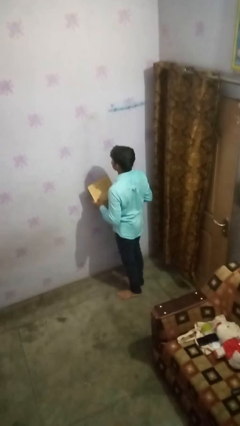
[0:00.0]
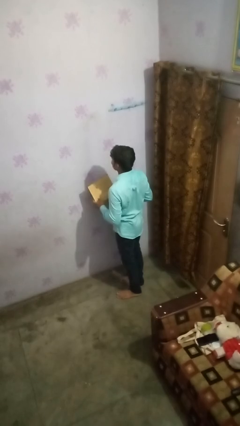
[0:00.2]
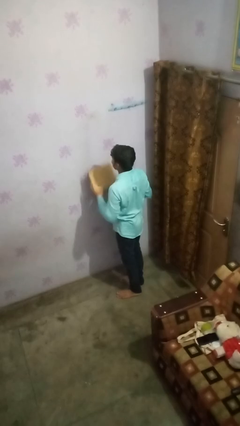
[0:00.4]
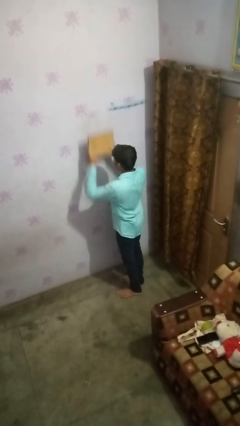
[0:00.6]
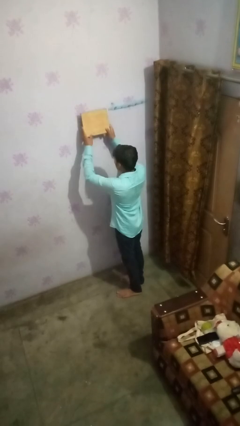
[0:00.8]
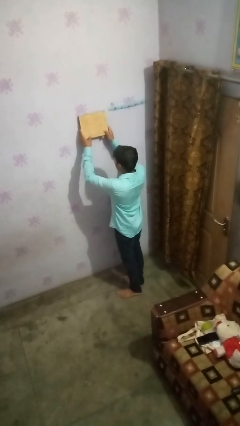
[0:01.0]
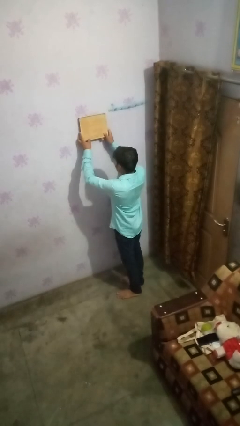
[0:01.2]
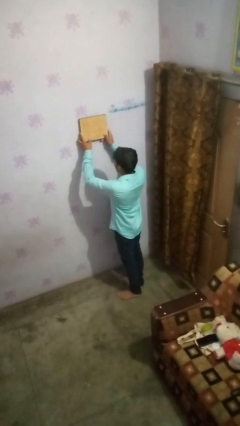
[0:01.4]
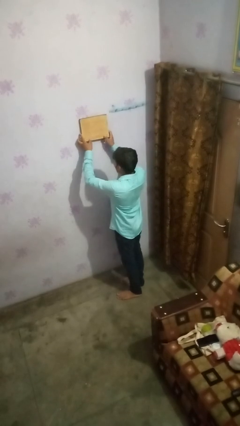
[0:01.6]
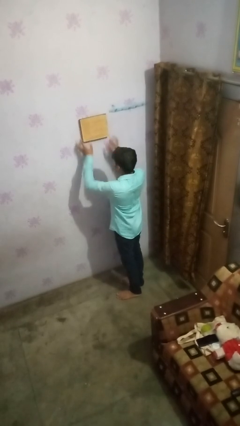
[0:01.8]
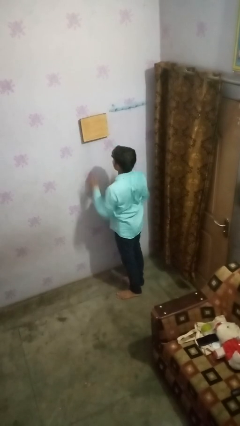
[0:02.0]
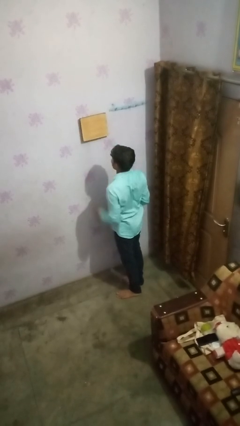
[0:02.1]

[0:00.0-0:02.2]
person puts up picture frame

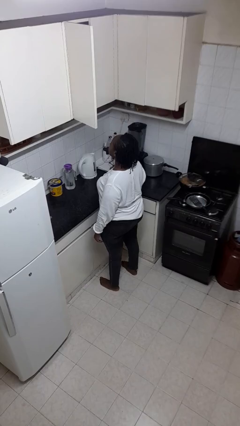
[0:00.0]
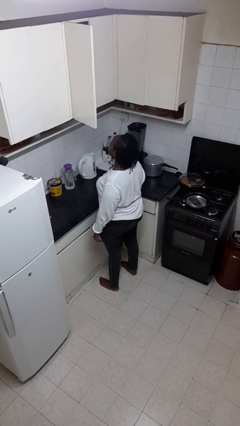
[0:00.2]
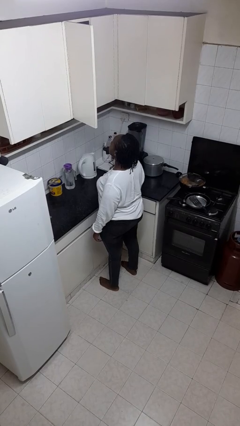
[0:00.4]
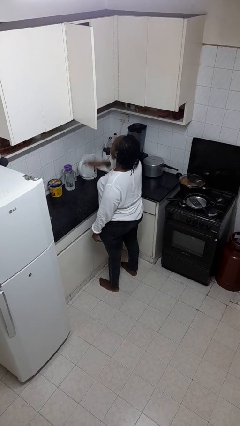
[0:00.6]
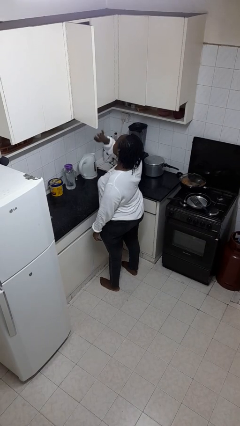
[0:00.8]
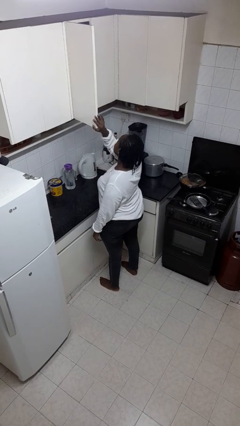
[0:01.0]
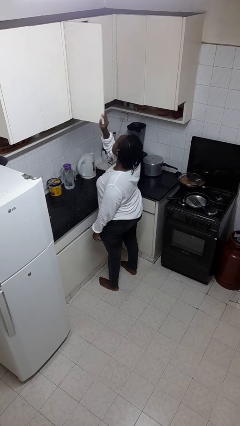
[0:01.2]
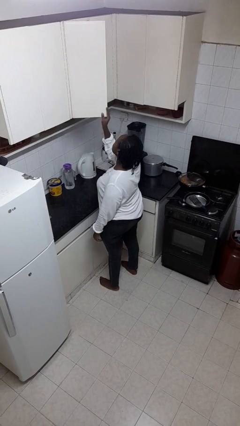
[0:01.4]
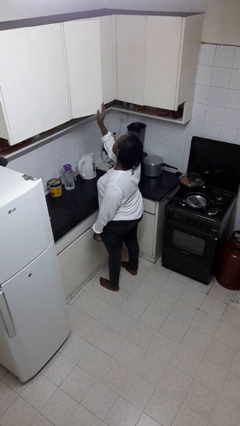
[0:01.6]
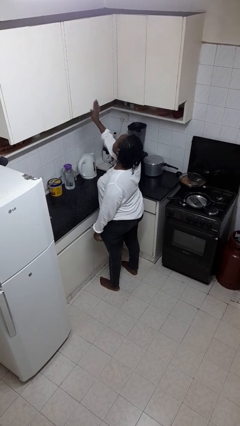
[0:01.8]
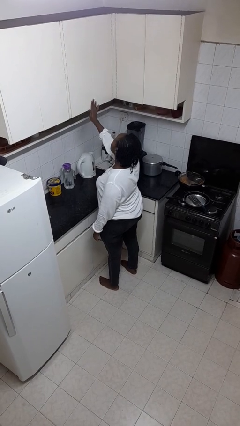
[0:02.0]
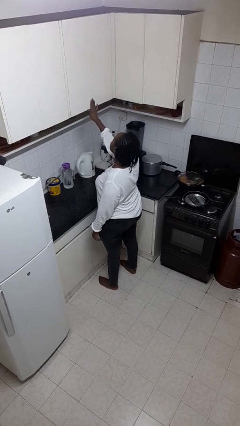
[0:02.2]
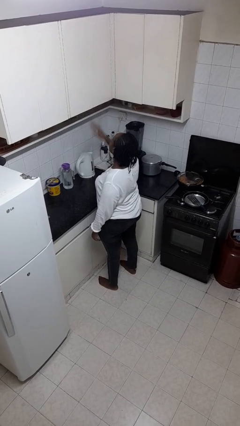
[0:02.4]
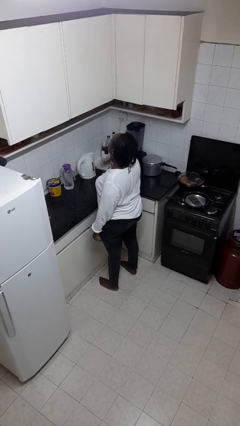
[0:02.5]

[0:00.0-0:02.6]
person closes cabinet

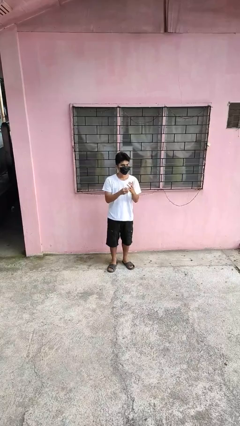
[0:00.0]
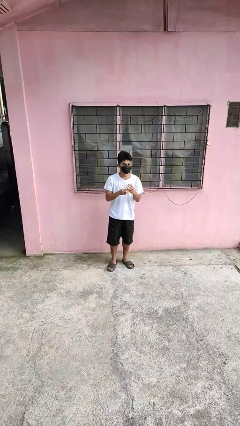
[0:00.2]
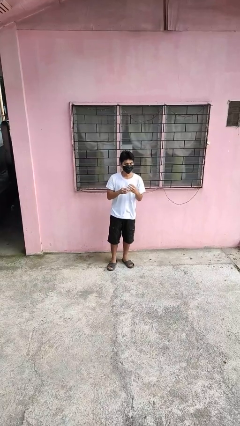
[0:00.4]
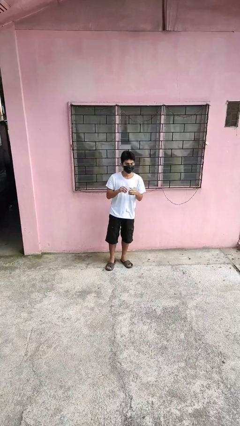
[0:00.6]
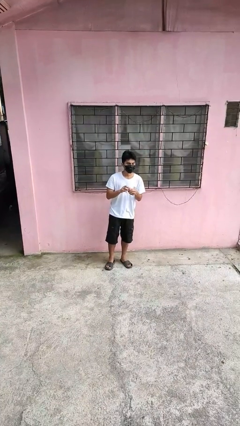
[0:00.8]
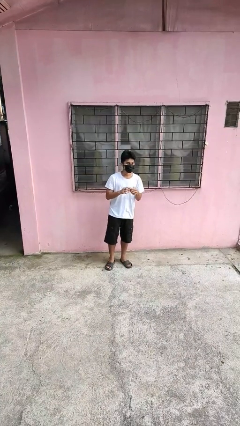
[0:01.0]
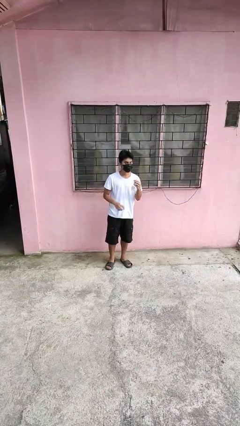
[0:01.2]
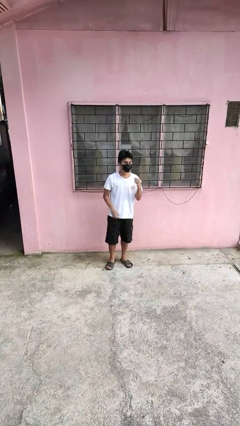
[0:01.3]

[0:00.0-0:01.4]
person takes off ring

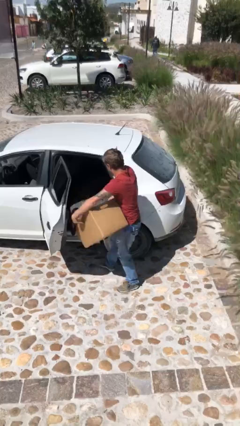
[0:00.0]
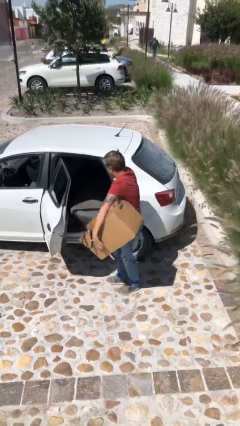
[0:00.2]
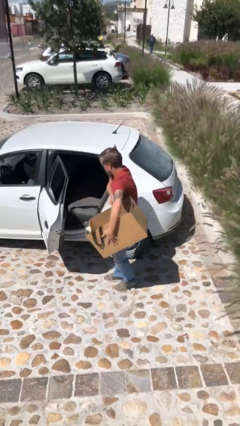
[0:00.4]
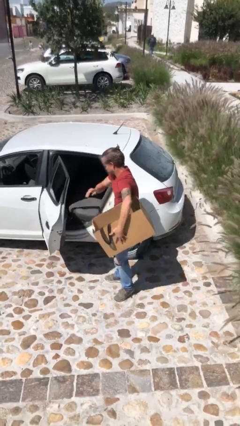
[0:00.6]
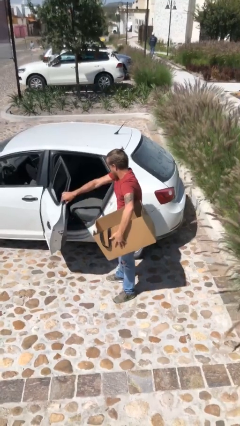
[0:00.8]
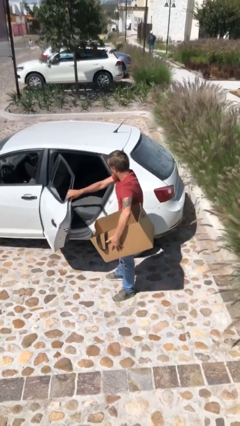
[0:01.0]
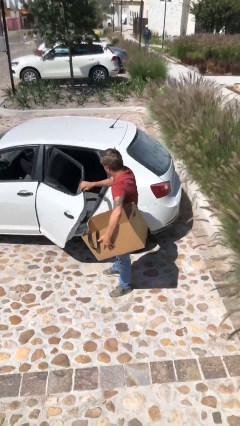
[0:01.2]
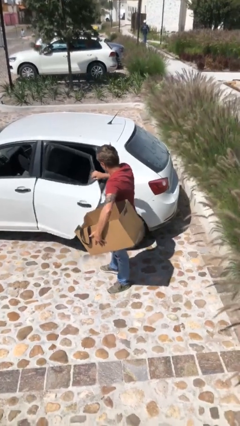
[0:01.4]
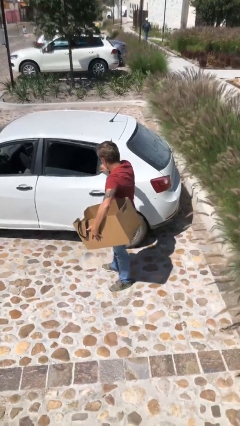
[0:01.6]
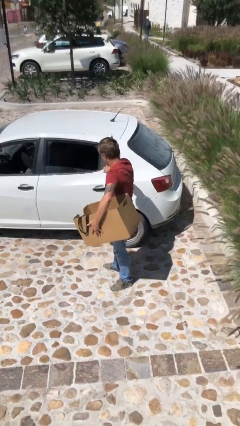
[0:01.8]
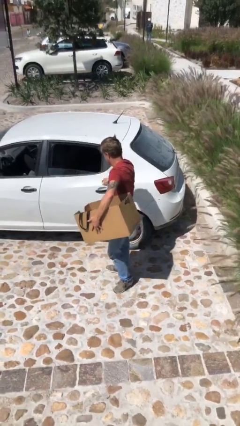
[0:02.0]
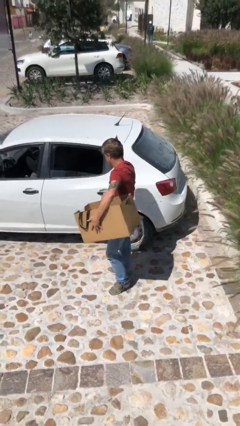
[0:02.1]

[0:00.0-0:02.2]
person closes car door

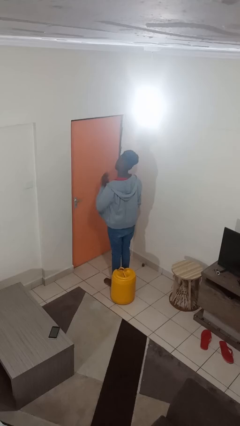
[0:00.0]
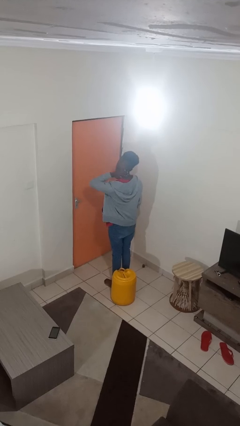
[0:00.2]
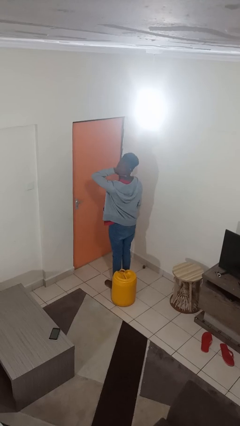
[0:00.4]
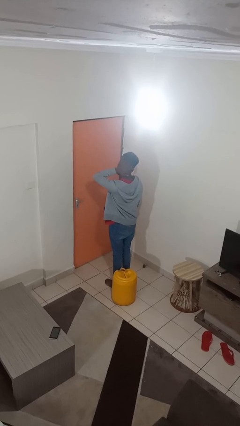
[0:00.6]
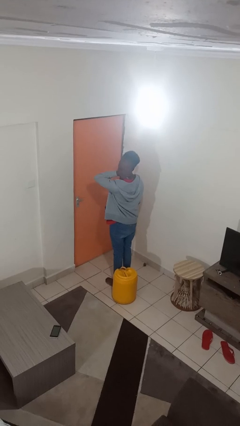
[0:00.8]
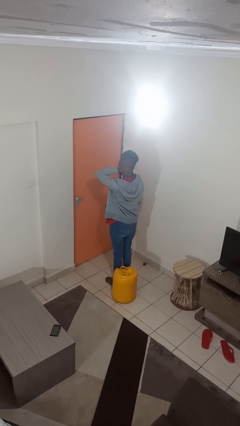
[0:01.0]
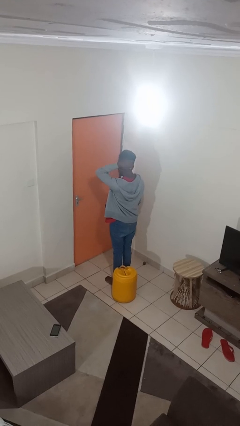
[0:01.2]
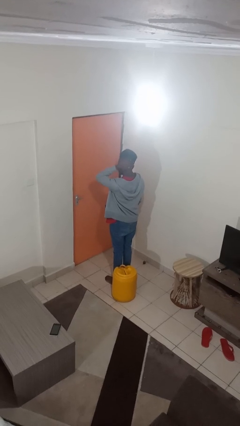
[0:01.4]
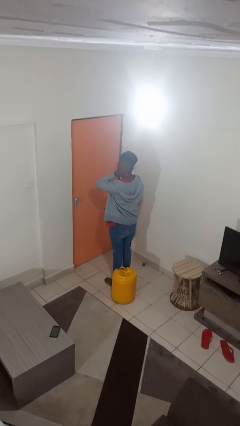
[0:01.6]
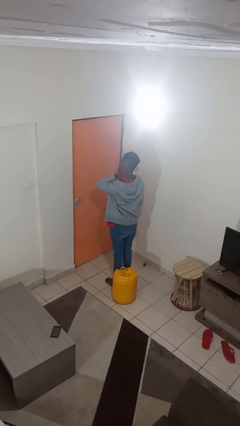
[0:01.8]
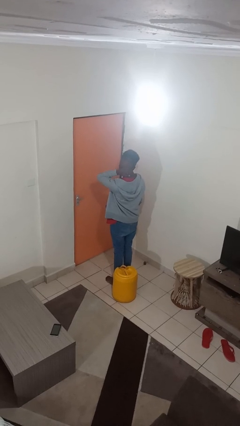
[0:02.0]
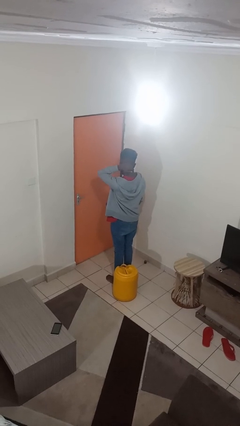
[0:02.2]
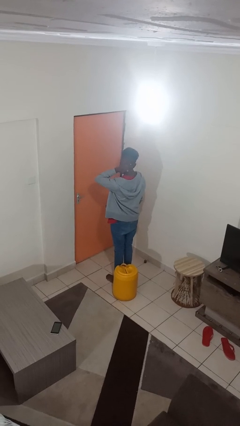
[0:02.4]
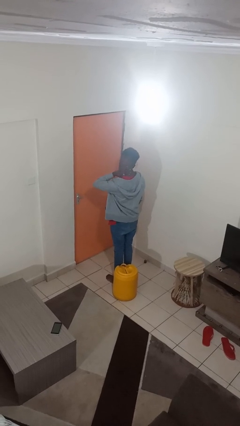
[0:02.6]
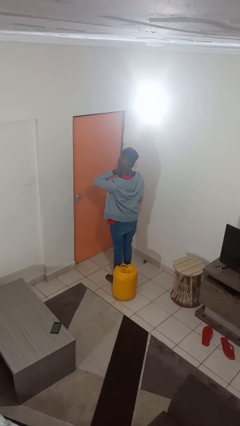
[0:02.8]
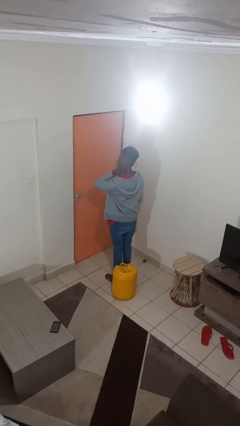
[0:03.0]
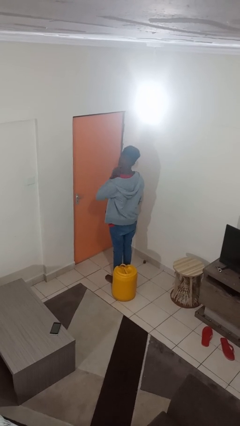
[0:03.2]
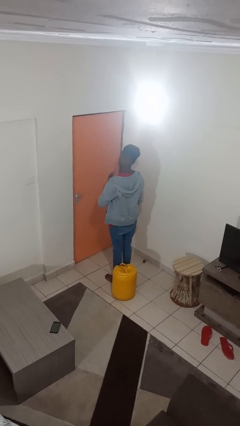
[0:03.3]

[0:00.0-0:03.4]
person rubs neck

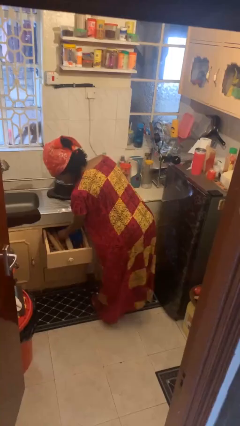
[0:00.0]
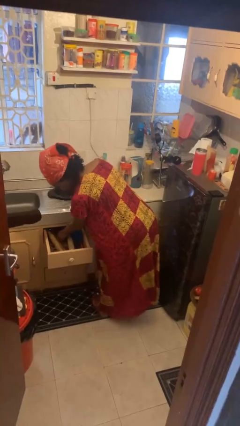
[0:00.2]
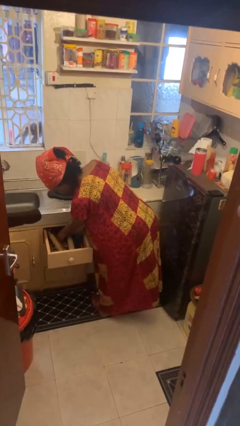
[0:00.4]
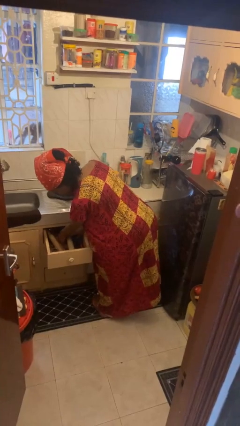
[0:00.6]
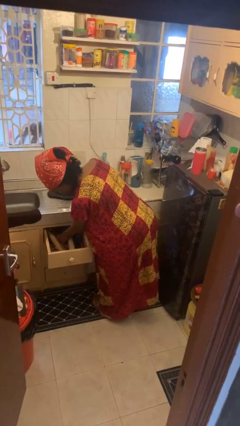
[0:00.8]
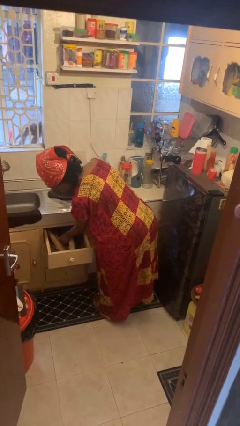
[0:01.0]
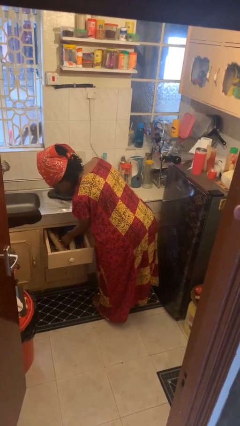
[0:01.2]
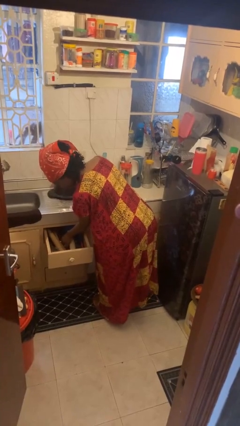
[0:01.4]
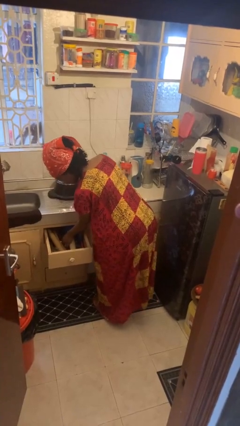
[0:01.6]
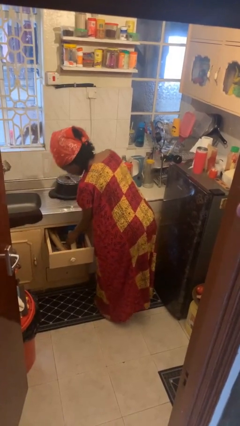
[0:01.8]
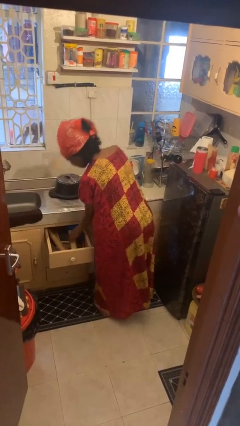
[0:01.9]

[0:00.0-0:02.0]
person searches in kitchen drawer

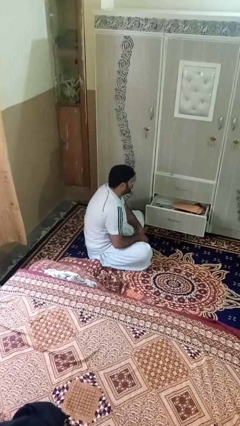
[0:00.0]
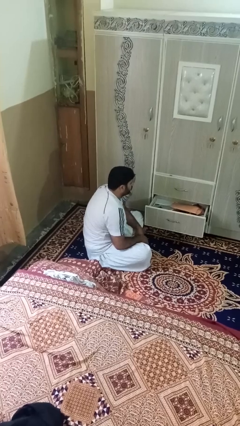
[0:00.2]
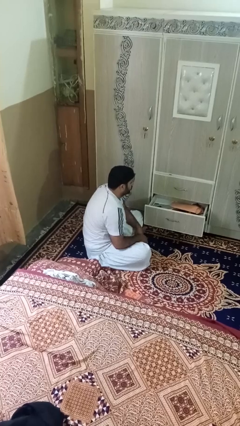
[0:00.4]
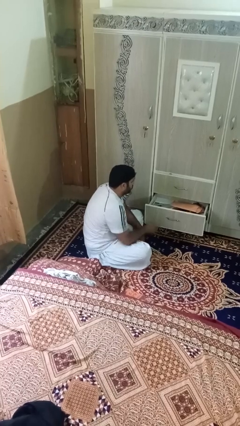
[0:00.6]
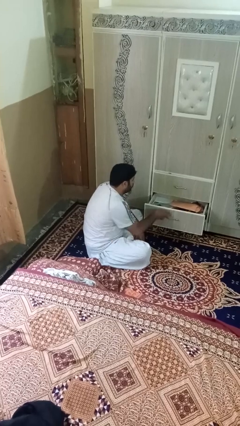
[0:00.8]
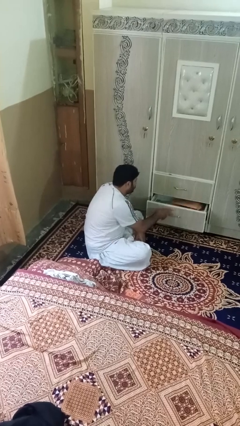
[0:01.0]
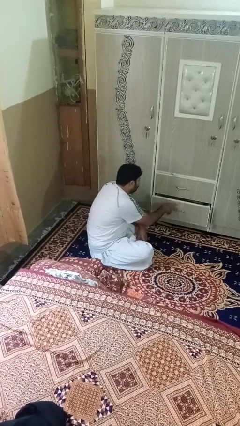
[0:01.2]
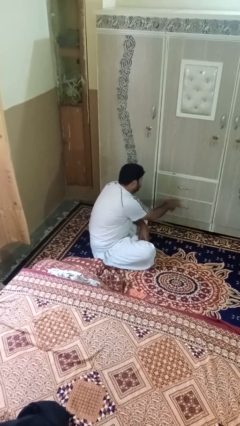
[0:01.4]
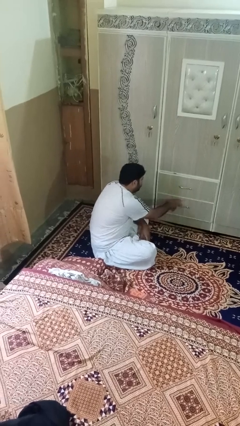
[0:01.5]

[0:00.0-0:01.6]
person closes dresser drawer

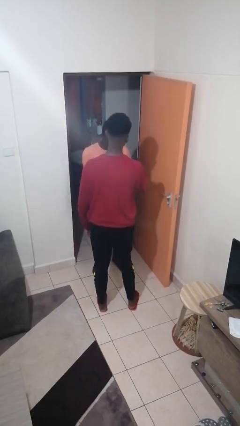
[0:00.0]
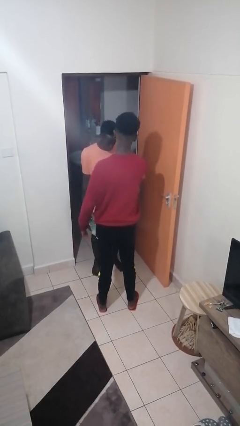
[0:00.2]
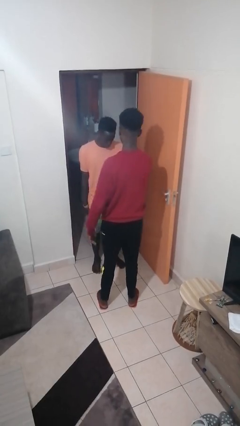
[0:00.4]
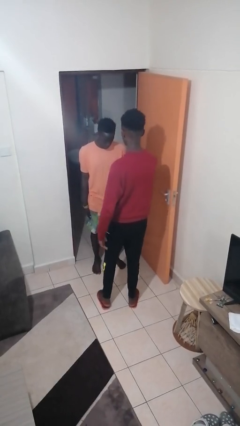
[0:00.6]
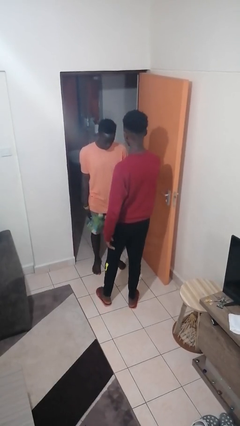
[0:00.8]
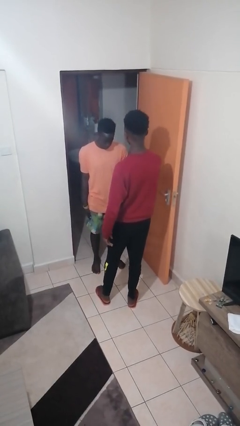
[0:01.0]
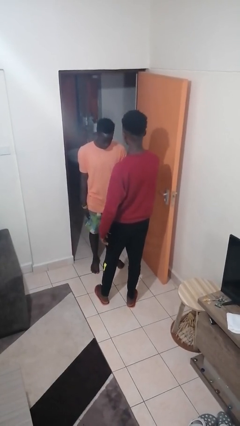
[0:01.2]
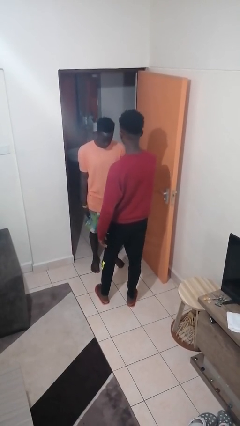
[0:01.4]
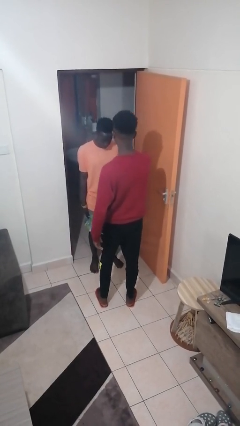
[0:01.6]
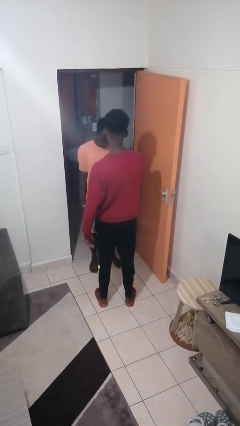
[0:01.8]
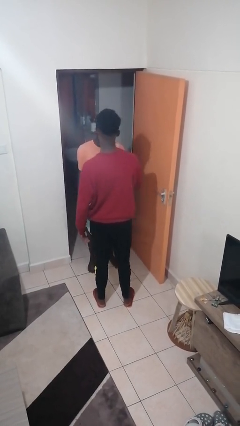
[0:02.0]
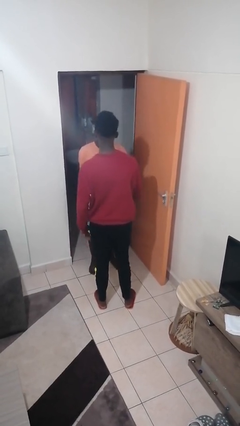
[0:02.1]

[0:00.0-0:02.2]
person grabs person by bicep
